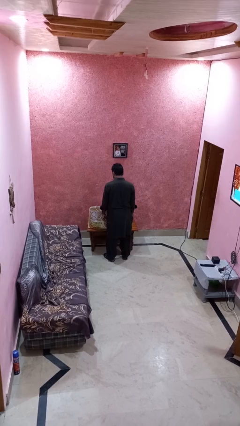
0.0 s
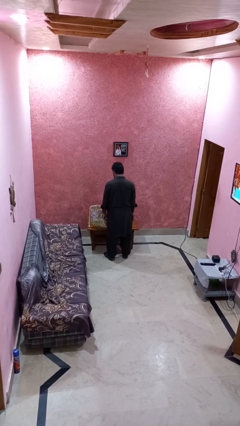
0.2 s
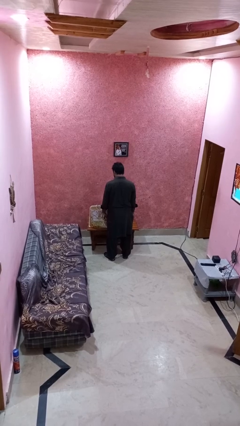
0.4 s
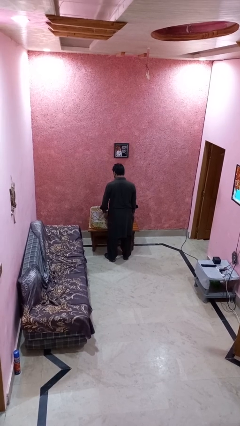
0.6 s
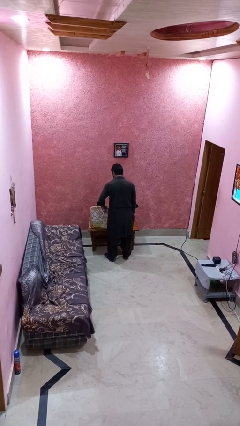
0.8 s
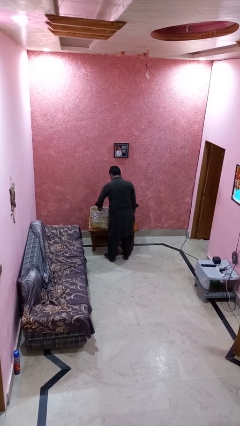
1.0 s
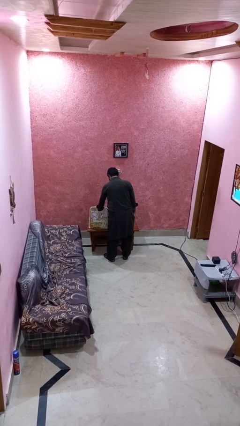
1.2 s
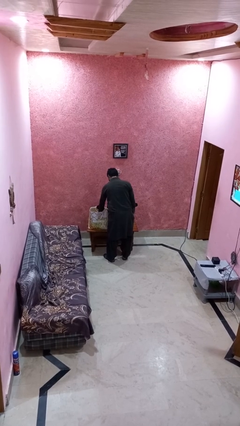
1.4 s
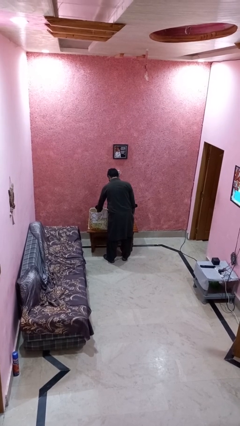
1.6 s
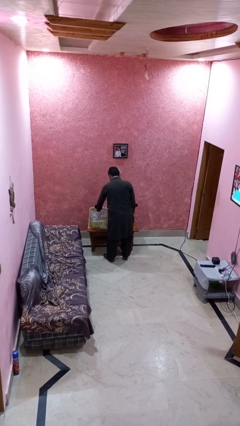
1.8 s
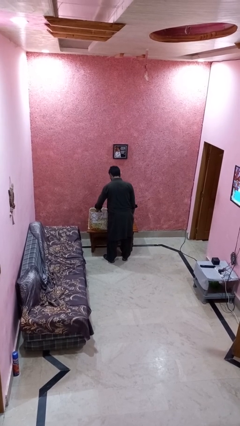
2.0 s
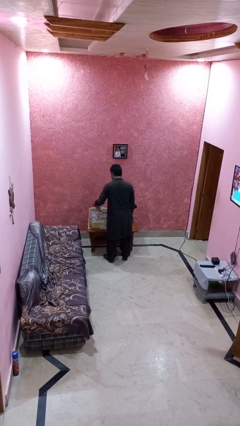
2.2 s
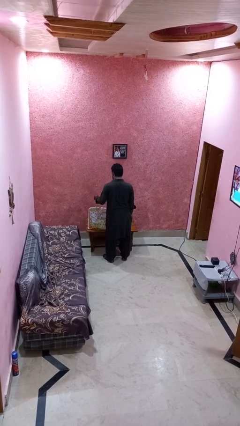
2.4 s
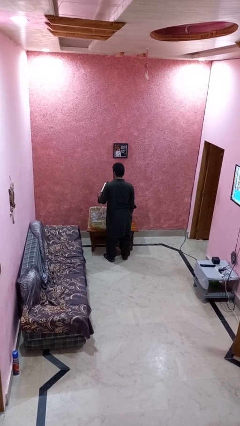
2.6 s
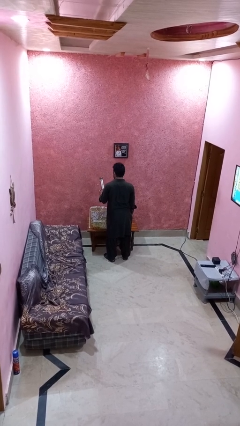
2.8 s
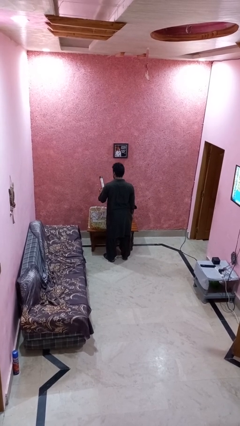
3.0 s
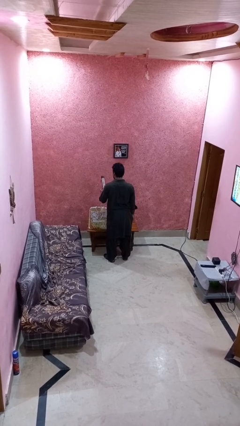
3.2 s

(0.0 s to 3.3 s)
person takes object from bag

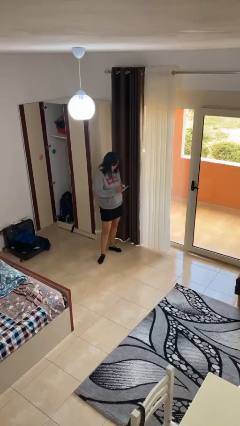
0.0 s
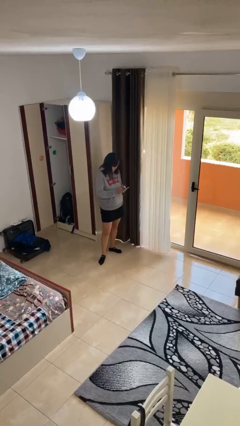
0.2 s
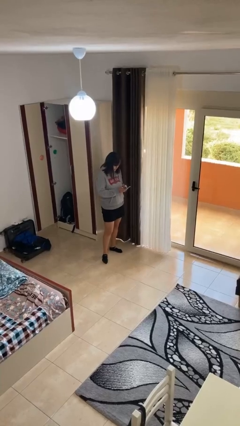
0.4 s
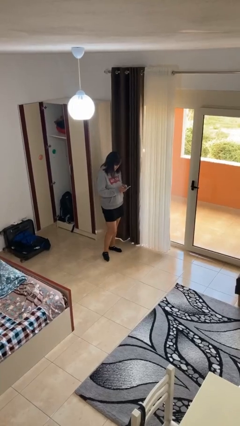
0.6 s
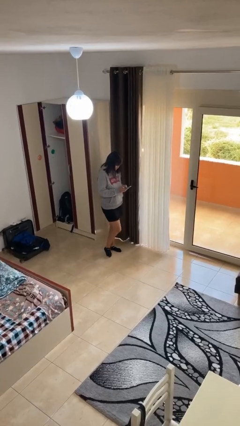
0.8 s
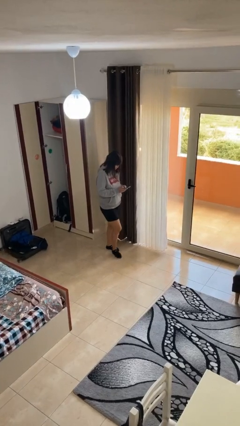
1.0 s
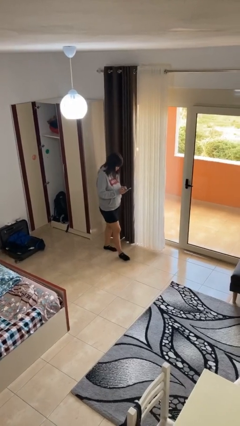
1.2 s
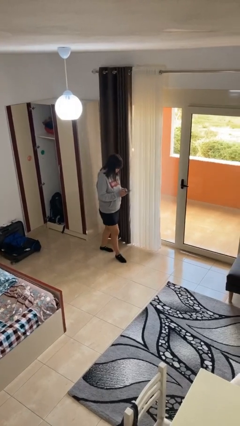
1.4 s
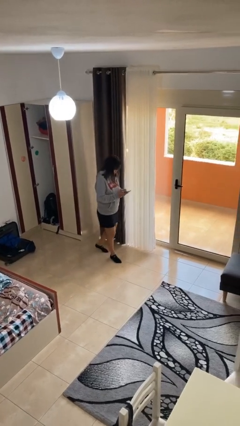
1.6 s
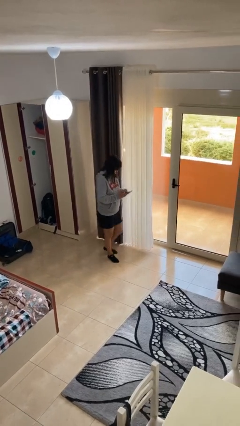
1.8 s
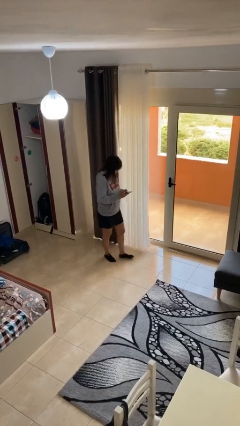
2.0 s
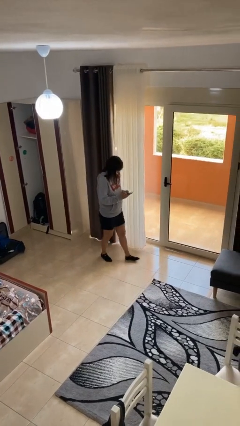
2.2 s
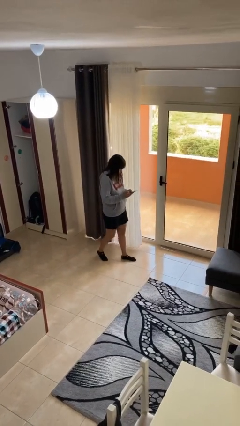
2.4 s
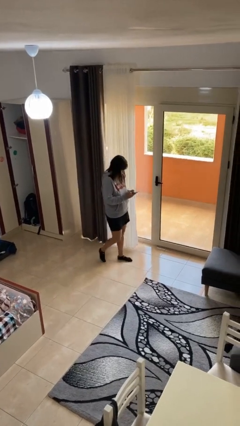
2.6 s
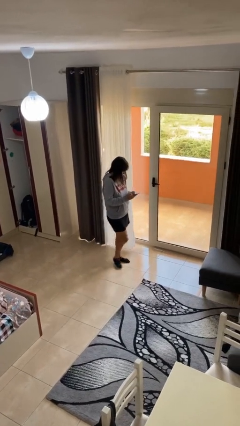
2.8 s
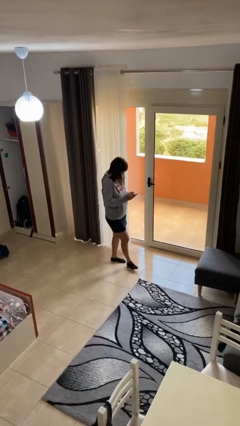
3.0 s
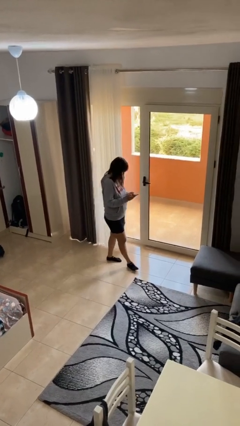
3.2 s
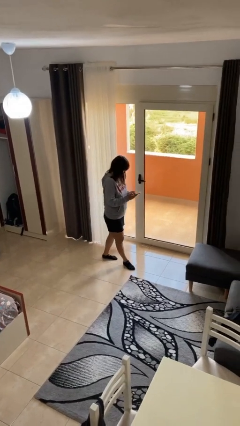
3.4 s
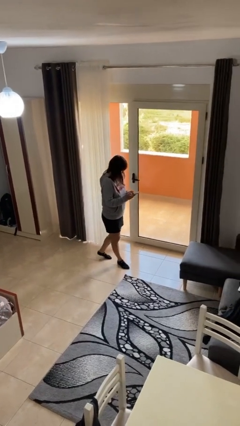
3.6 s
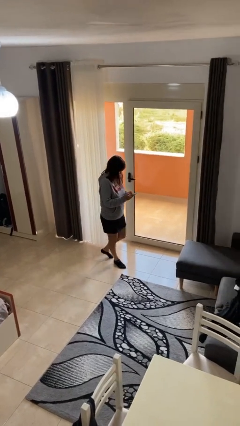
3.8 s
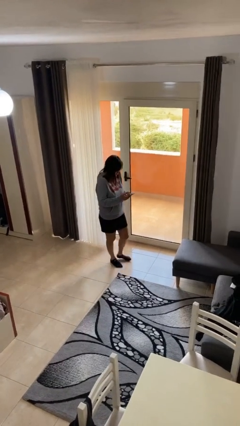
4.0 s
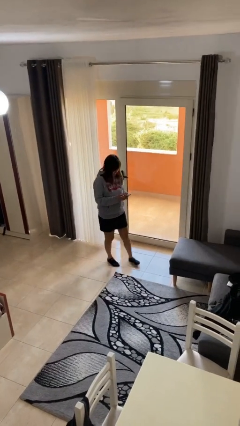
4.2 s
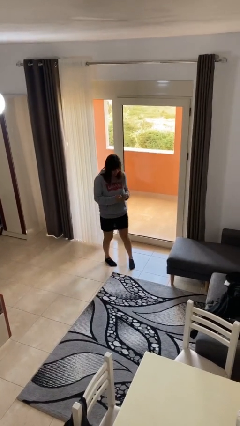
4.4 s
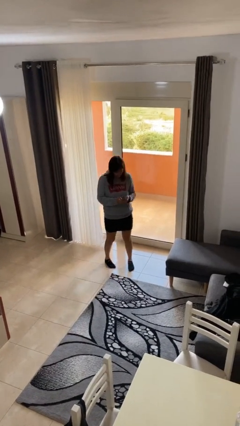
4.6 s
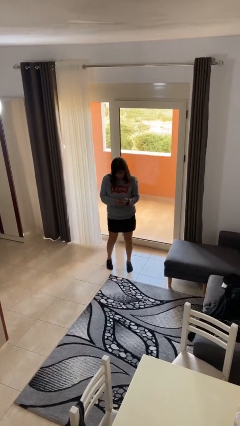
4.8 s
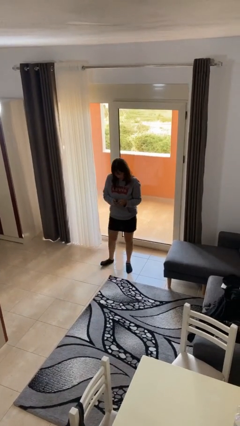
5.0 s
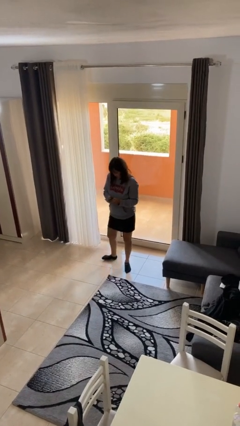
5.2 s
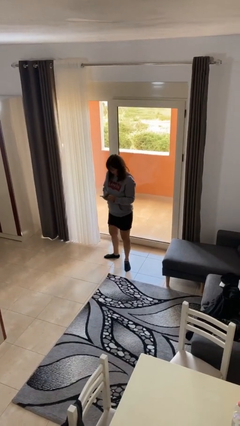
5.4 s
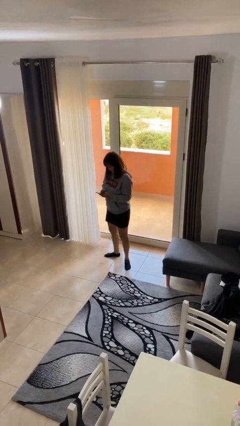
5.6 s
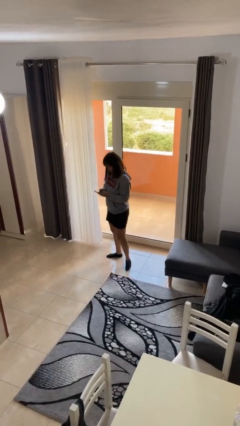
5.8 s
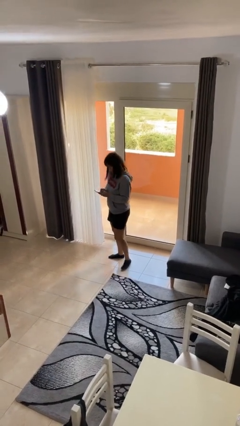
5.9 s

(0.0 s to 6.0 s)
person texts on phone

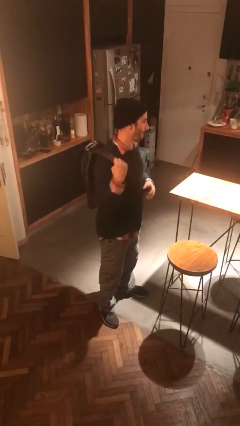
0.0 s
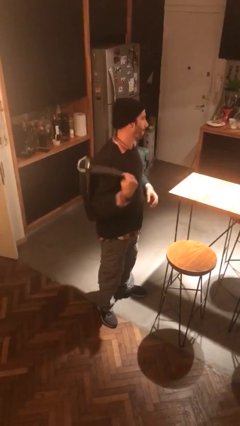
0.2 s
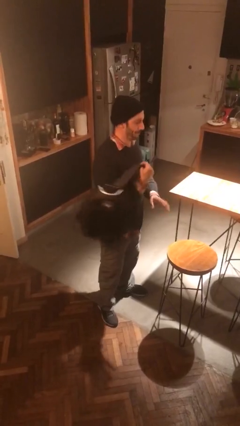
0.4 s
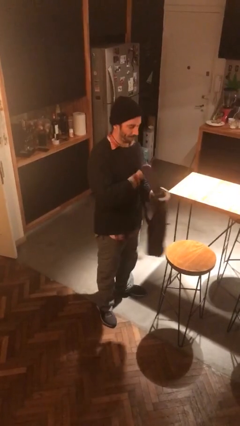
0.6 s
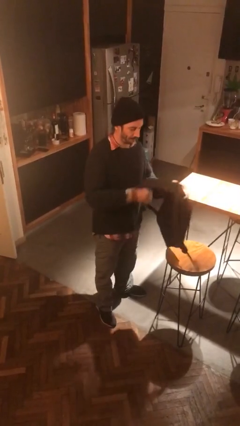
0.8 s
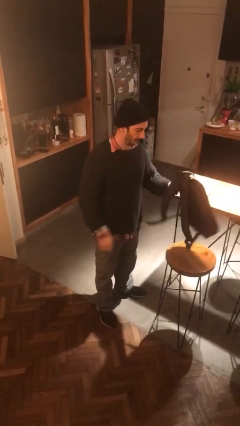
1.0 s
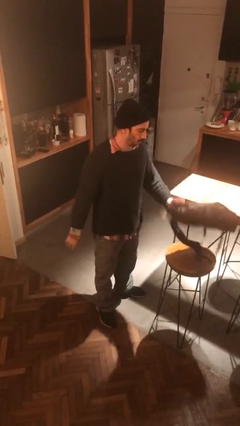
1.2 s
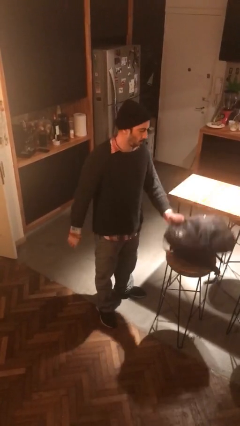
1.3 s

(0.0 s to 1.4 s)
person takes off backpack

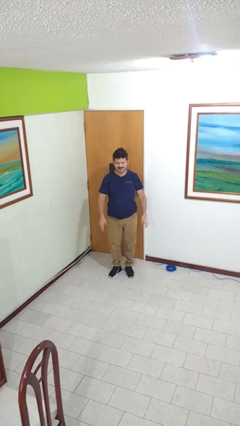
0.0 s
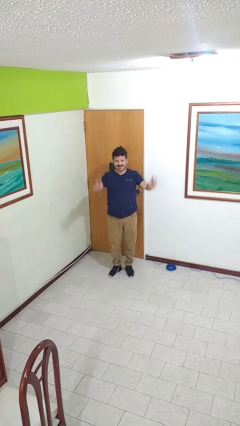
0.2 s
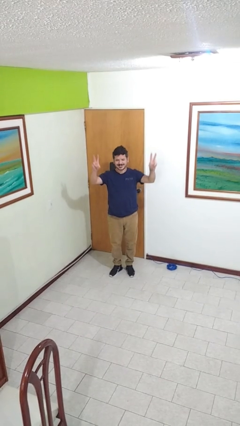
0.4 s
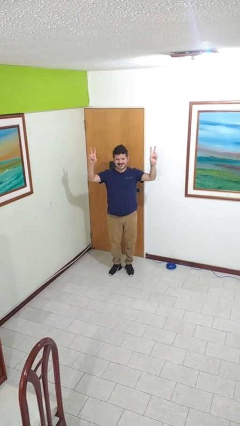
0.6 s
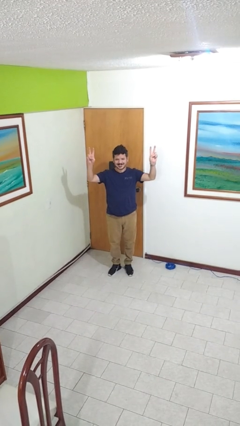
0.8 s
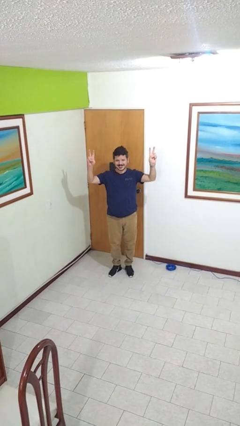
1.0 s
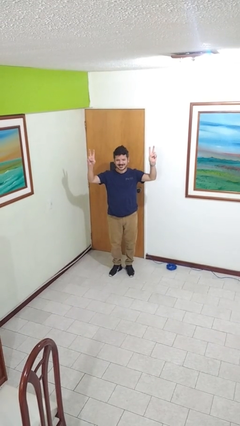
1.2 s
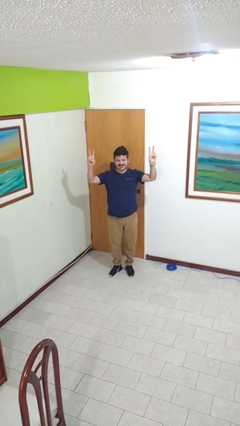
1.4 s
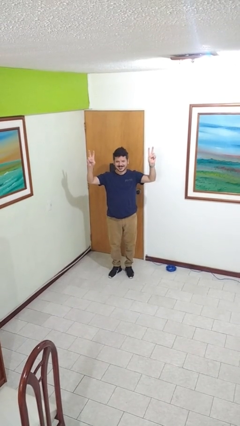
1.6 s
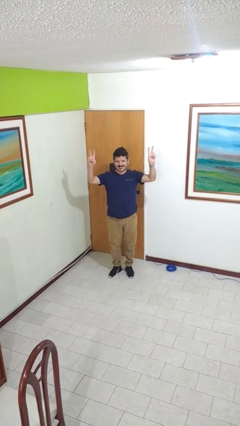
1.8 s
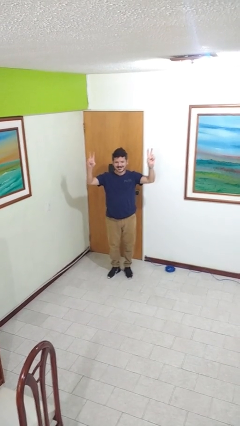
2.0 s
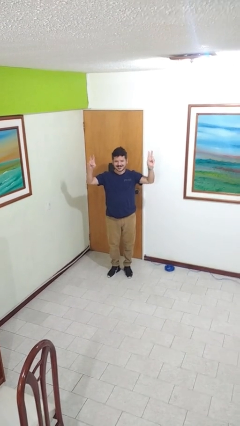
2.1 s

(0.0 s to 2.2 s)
person gestures peace

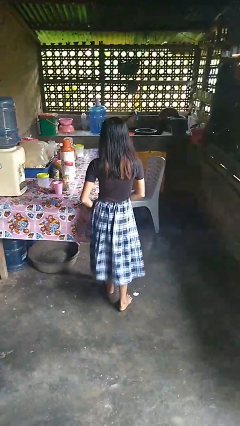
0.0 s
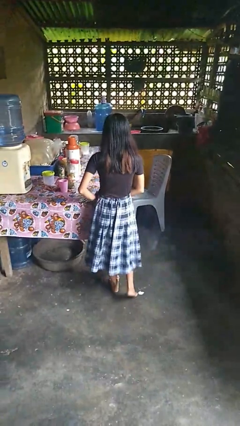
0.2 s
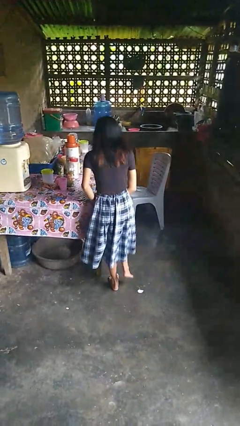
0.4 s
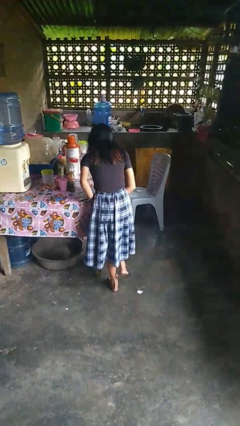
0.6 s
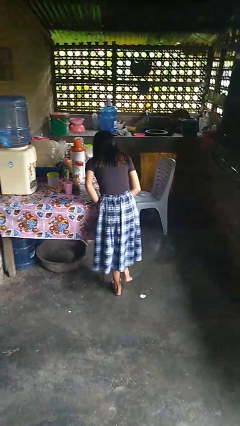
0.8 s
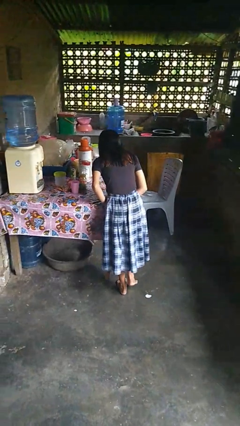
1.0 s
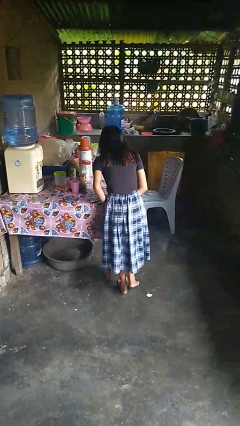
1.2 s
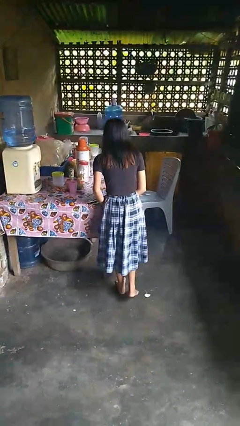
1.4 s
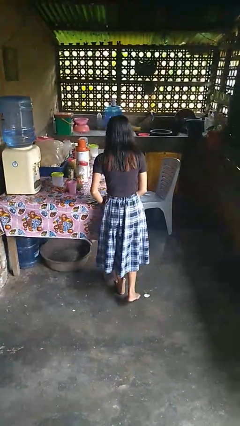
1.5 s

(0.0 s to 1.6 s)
person bumps into table

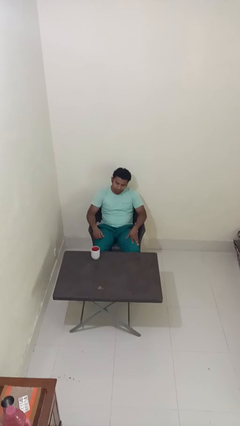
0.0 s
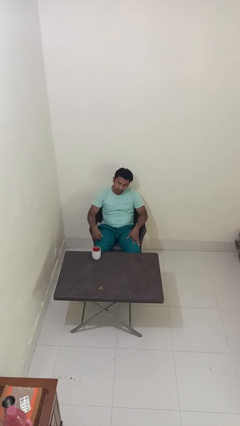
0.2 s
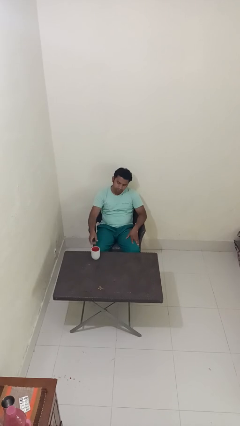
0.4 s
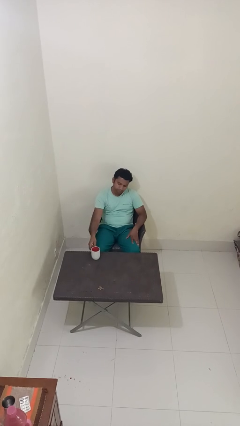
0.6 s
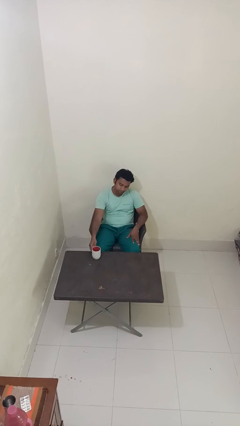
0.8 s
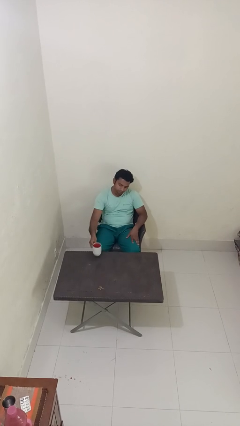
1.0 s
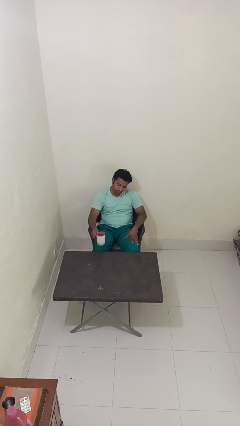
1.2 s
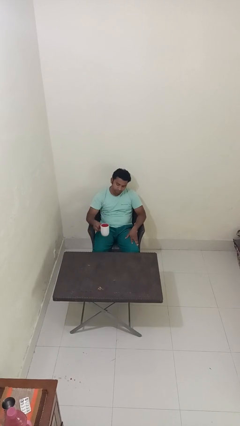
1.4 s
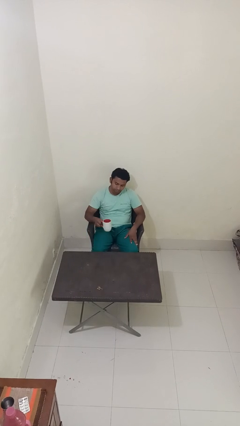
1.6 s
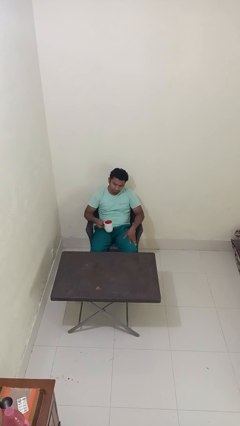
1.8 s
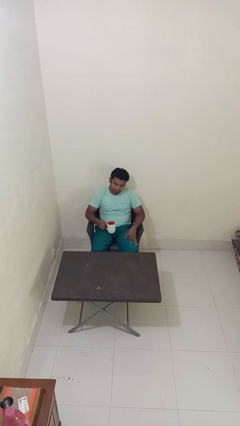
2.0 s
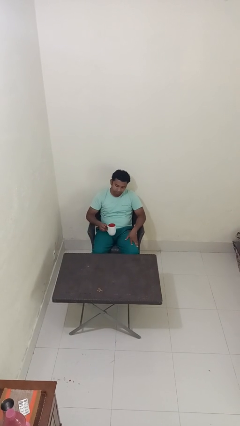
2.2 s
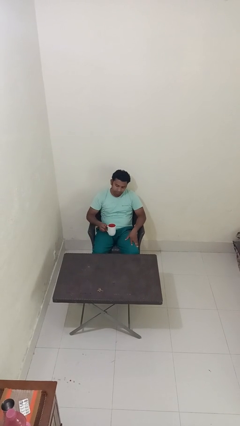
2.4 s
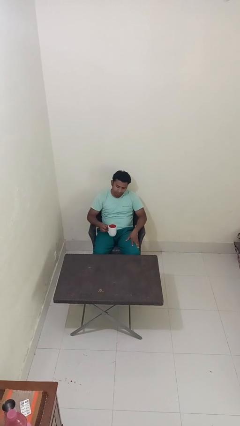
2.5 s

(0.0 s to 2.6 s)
person picks up object from table
